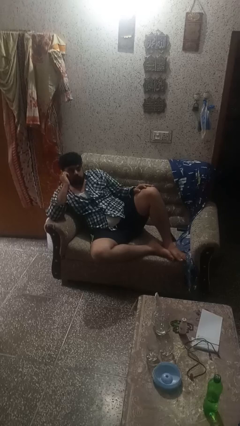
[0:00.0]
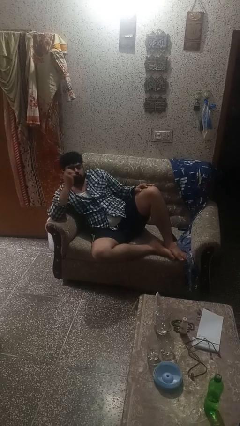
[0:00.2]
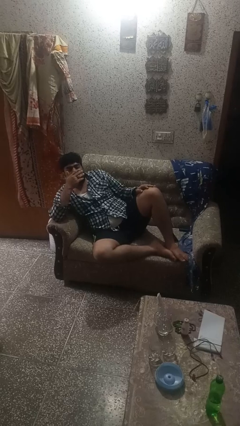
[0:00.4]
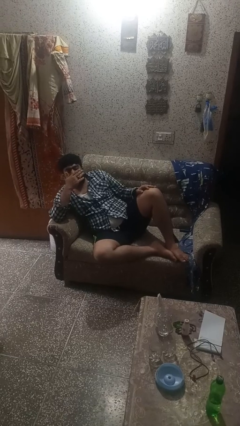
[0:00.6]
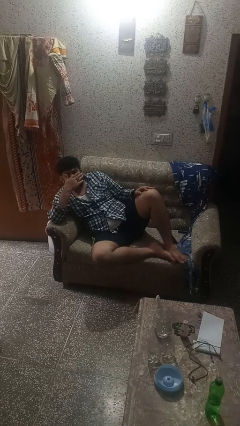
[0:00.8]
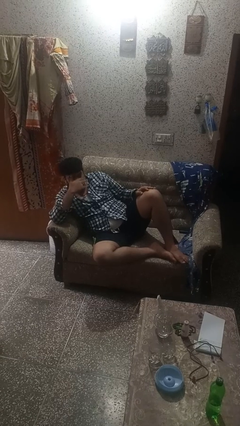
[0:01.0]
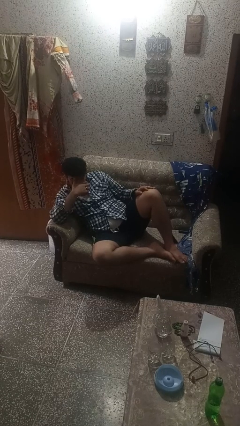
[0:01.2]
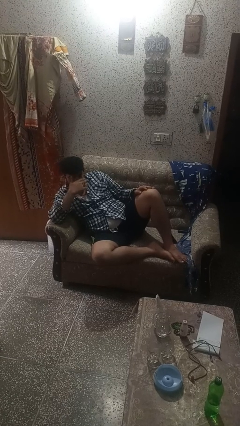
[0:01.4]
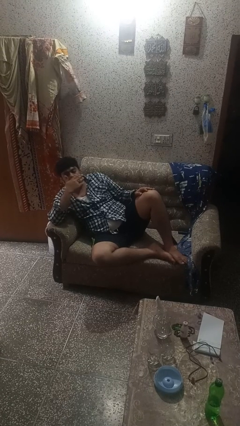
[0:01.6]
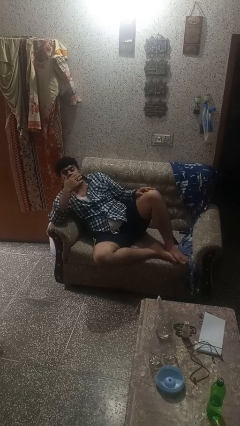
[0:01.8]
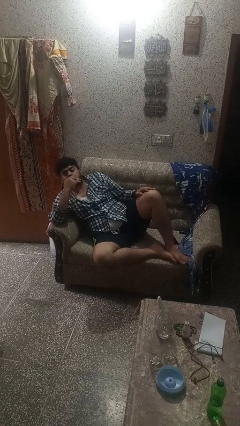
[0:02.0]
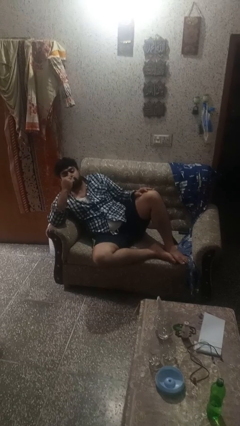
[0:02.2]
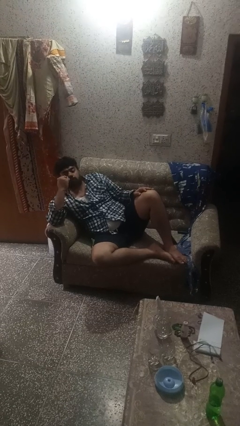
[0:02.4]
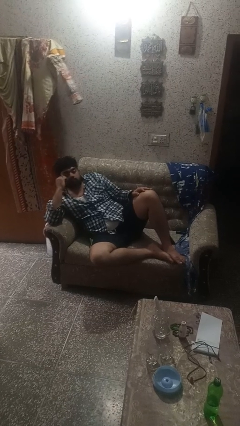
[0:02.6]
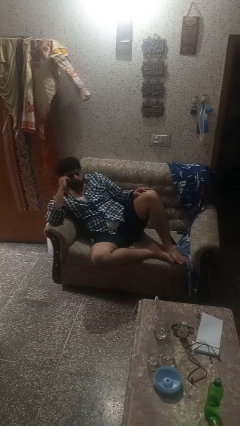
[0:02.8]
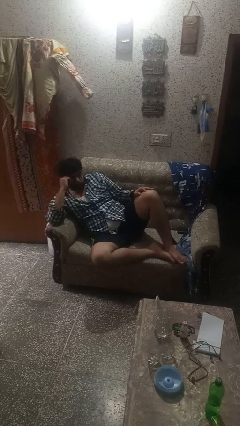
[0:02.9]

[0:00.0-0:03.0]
person sneezes into hand

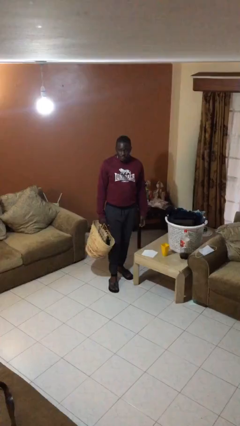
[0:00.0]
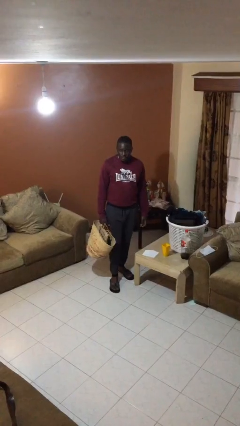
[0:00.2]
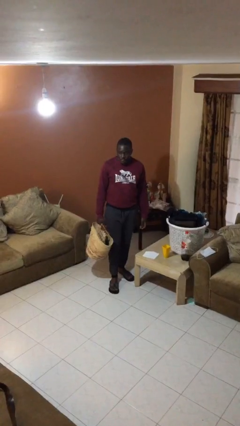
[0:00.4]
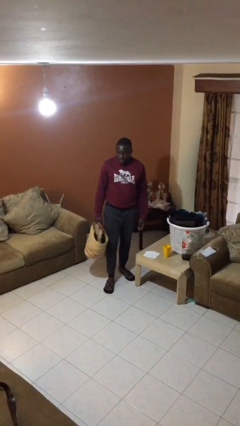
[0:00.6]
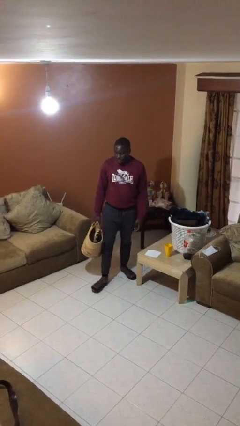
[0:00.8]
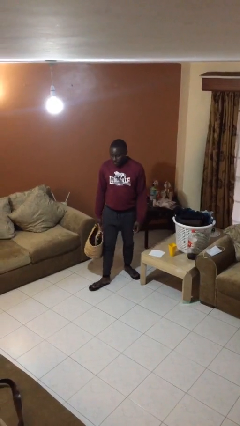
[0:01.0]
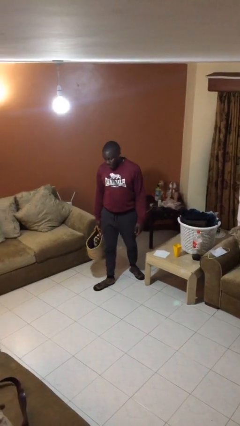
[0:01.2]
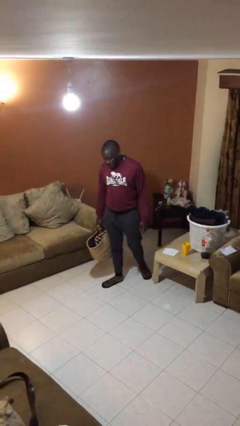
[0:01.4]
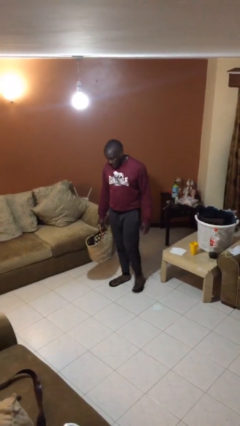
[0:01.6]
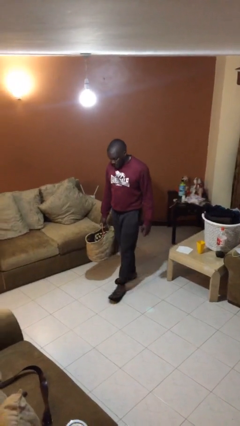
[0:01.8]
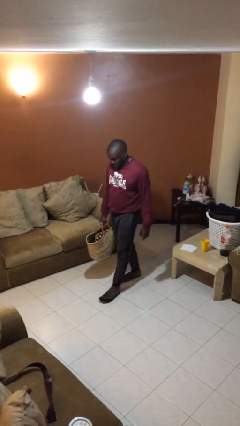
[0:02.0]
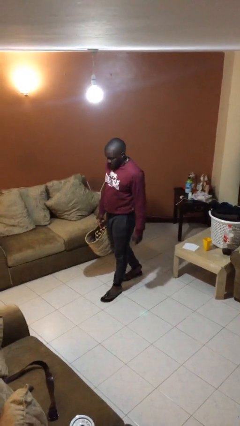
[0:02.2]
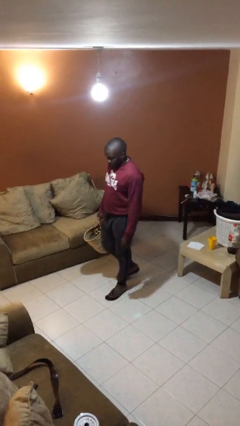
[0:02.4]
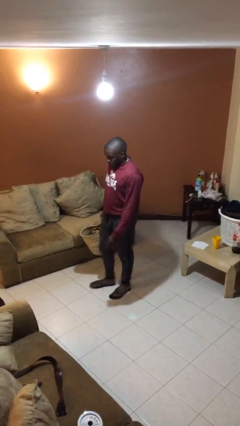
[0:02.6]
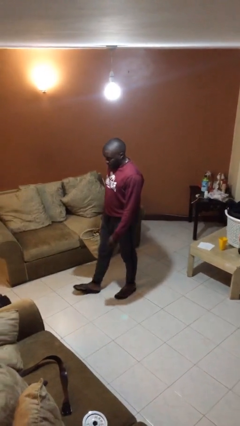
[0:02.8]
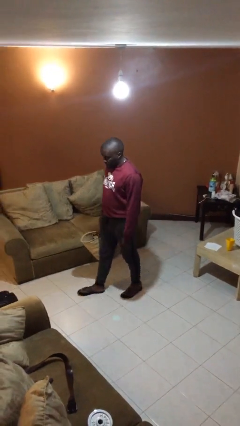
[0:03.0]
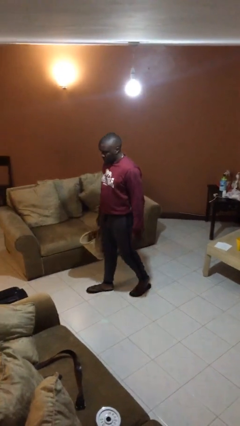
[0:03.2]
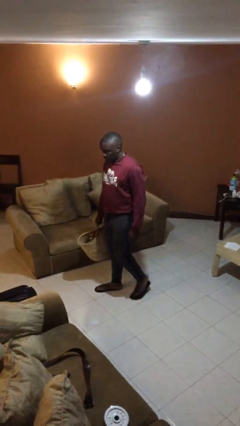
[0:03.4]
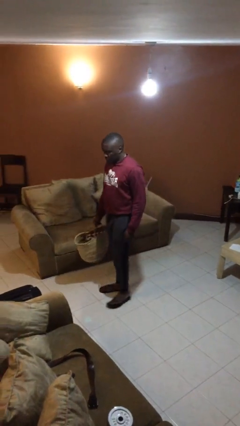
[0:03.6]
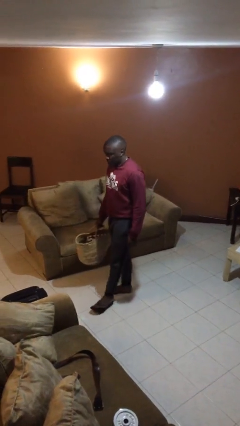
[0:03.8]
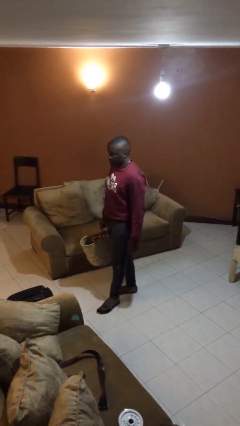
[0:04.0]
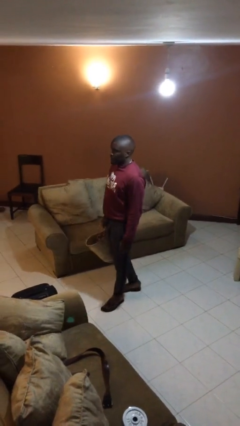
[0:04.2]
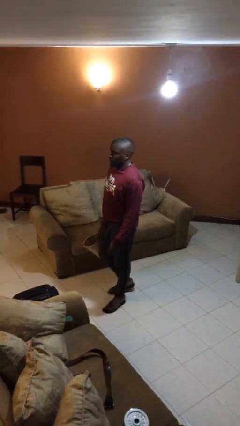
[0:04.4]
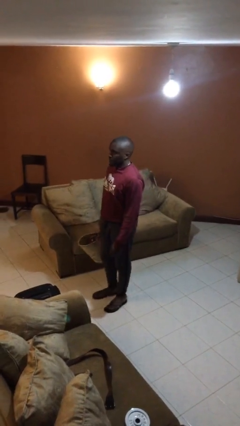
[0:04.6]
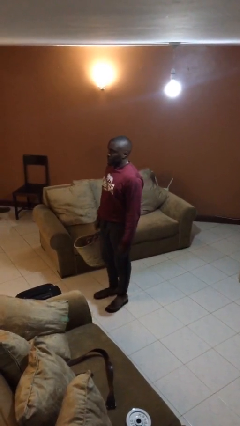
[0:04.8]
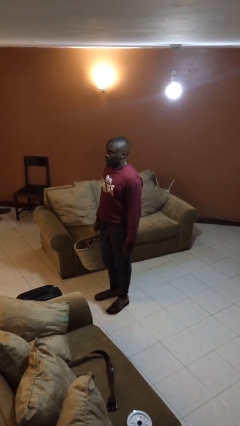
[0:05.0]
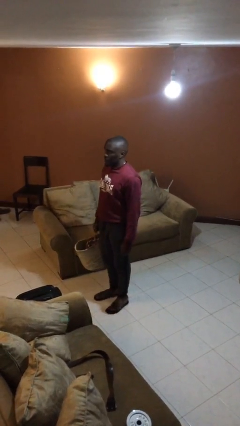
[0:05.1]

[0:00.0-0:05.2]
person carries groceries

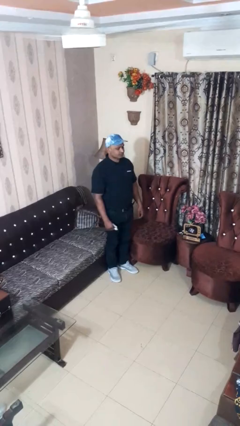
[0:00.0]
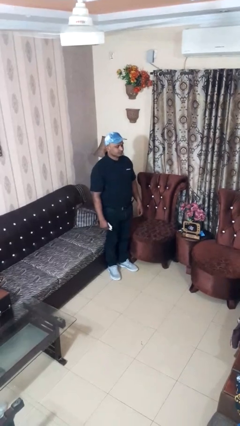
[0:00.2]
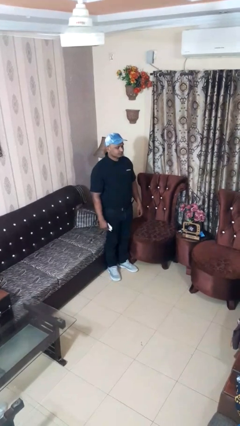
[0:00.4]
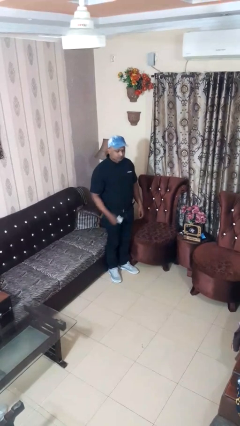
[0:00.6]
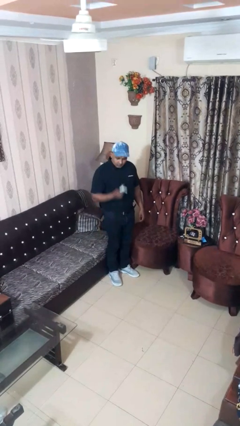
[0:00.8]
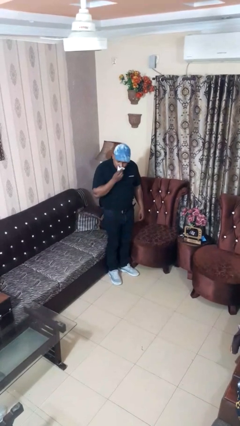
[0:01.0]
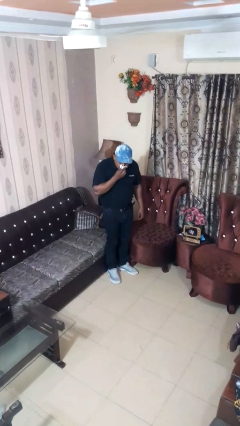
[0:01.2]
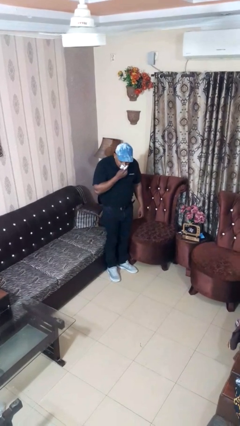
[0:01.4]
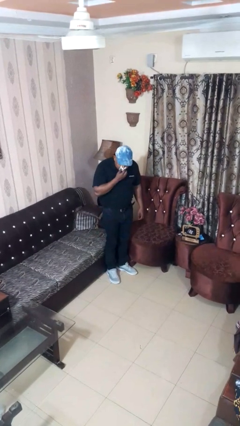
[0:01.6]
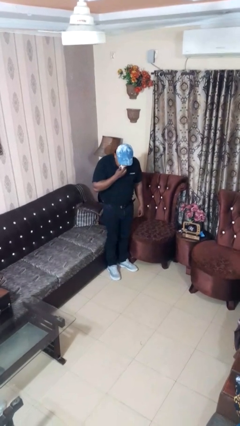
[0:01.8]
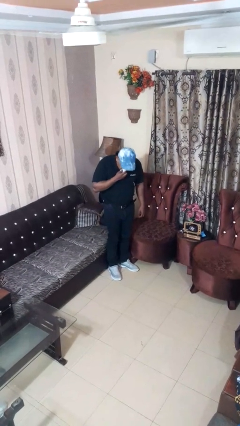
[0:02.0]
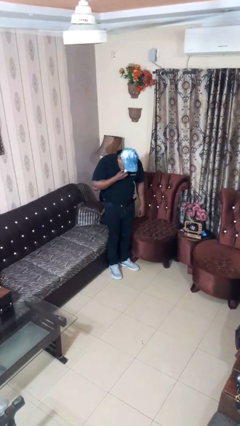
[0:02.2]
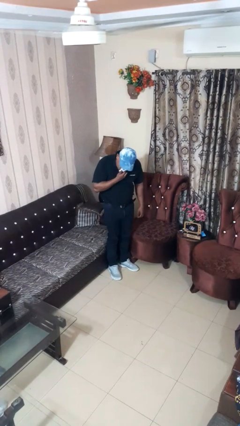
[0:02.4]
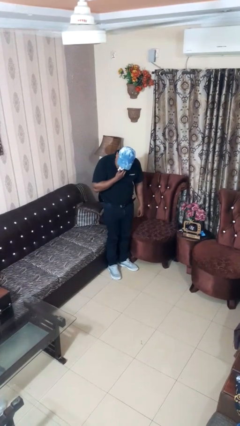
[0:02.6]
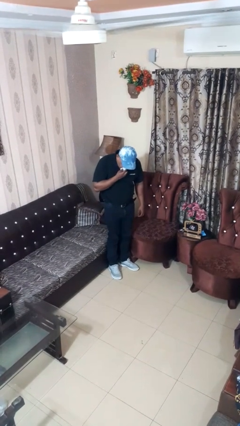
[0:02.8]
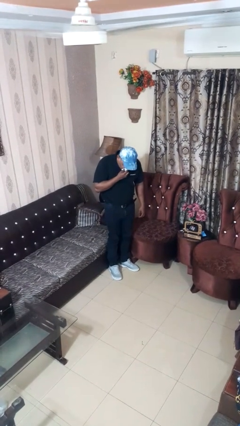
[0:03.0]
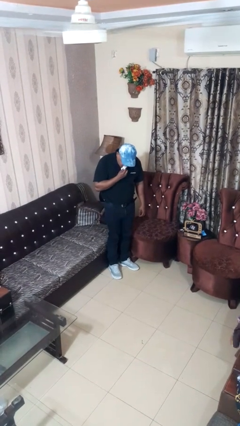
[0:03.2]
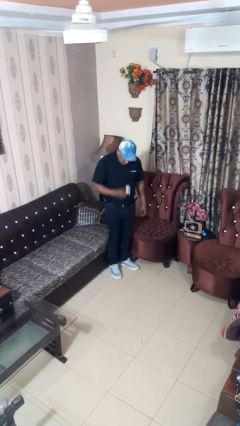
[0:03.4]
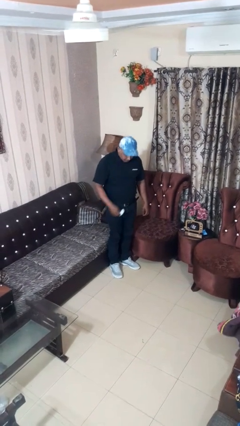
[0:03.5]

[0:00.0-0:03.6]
person blows nose

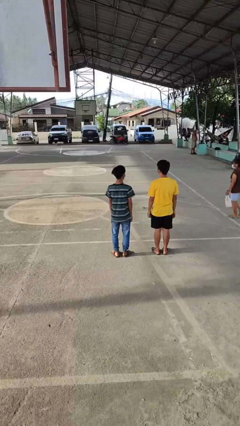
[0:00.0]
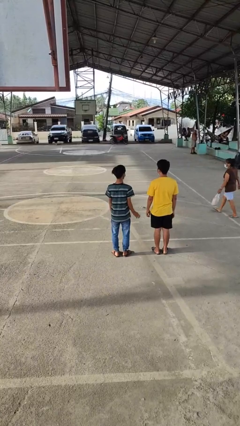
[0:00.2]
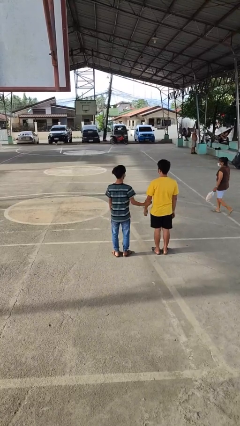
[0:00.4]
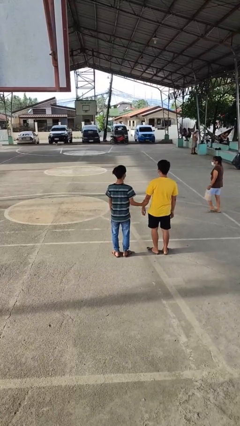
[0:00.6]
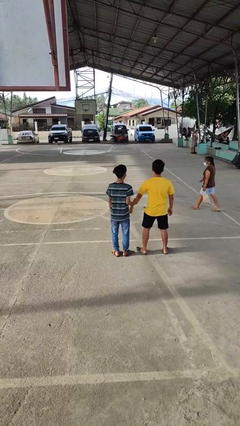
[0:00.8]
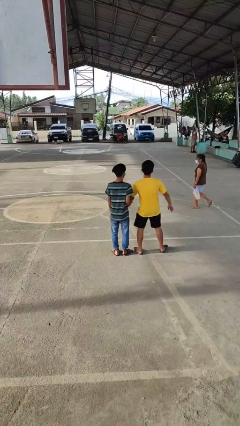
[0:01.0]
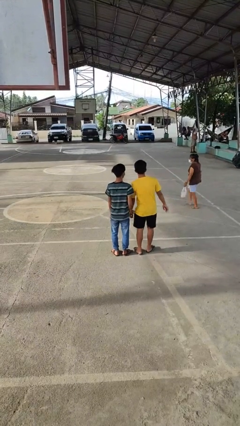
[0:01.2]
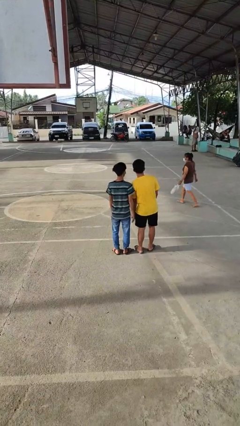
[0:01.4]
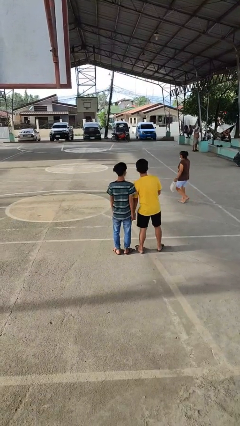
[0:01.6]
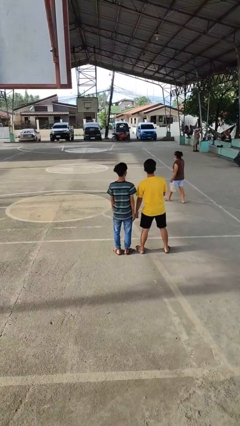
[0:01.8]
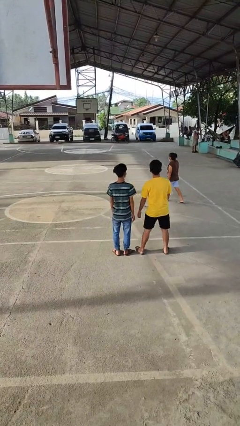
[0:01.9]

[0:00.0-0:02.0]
person grabs person by forearm

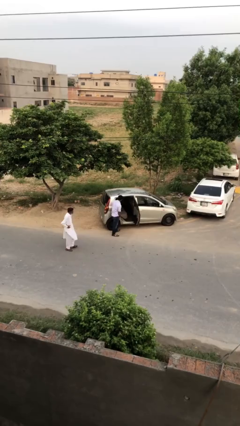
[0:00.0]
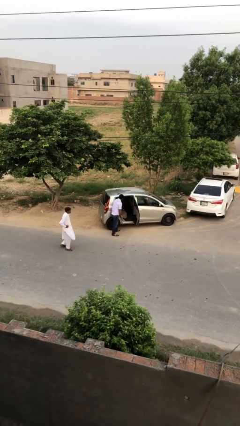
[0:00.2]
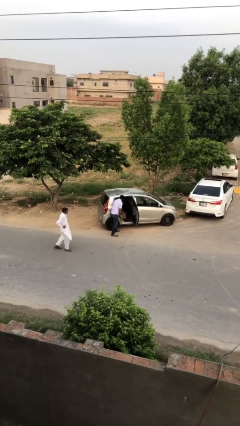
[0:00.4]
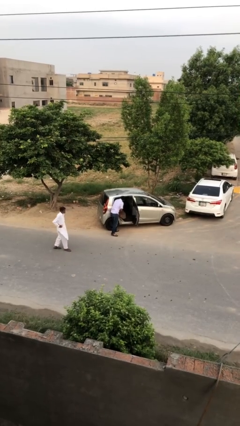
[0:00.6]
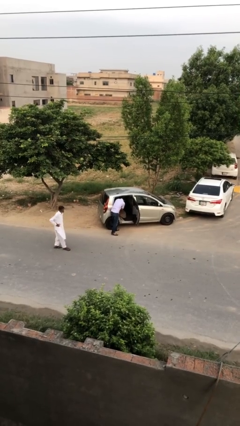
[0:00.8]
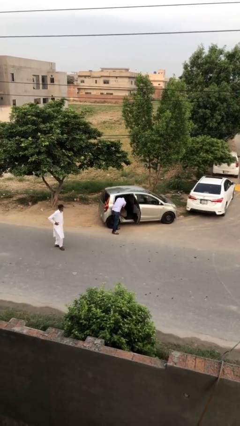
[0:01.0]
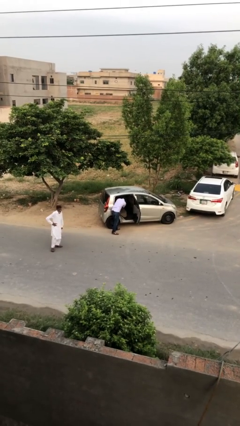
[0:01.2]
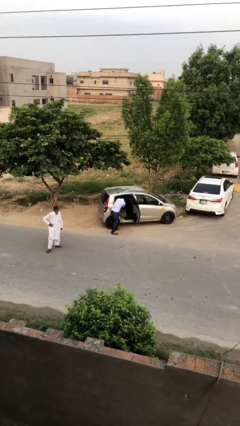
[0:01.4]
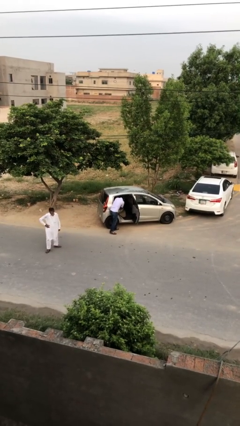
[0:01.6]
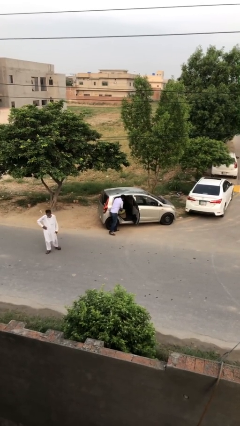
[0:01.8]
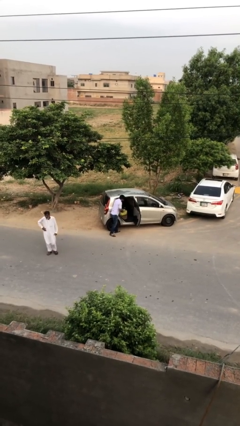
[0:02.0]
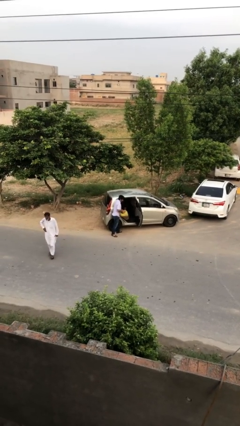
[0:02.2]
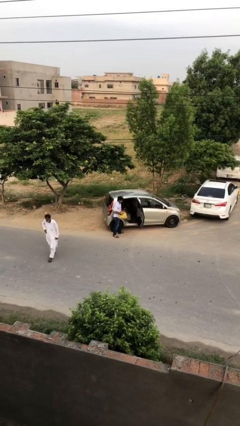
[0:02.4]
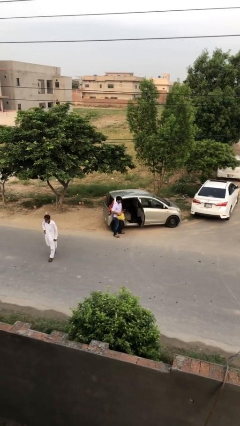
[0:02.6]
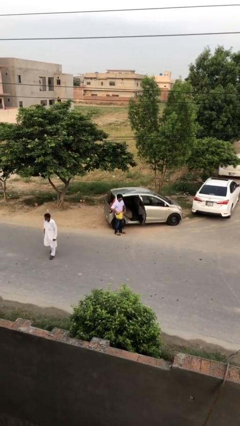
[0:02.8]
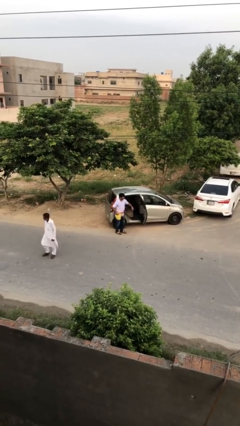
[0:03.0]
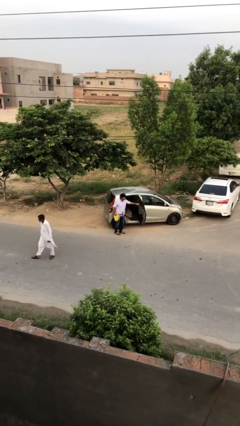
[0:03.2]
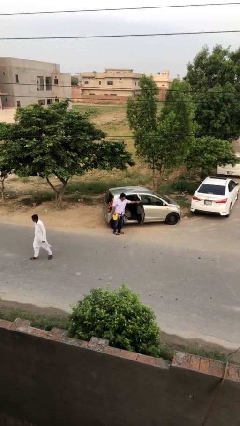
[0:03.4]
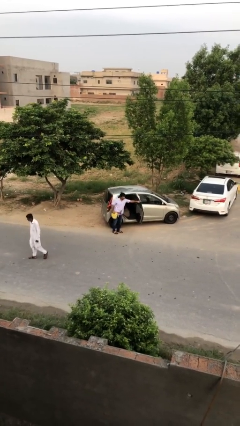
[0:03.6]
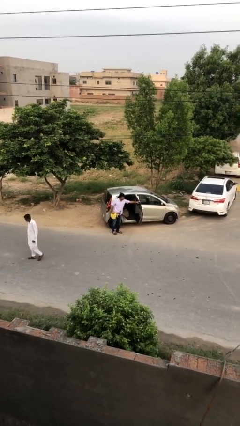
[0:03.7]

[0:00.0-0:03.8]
person unloads car
